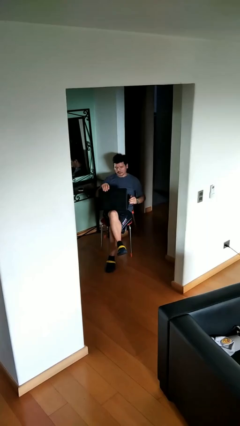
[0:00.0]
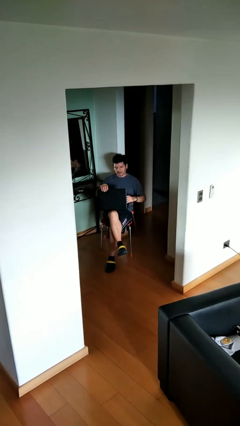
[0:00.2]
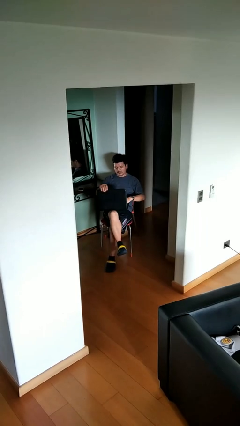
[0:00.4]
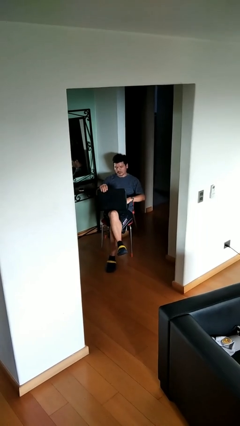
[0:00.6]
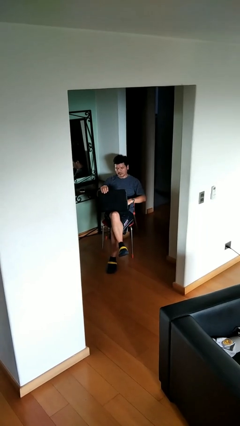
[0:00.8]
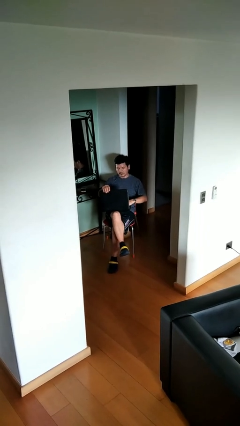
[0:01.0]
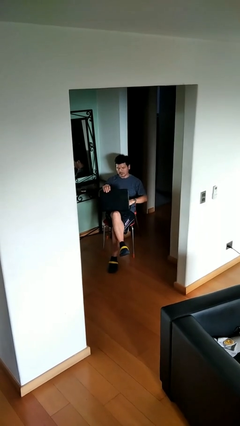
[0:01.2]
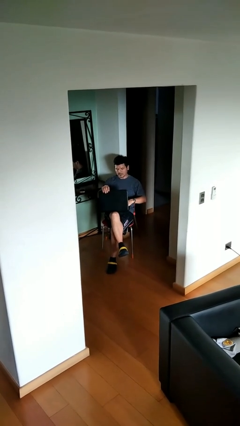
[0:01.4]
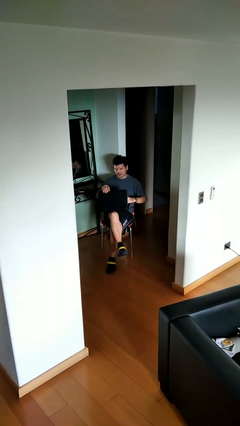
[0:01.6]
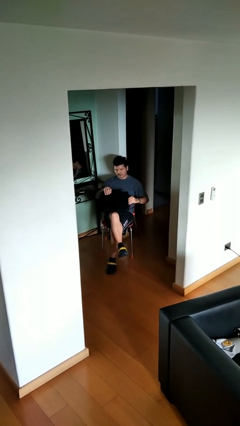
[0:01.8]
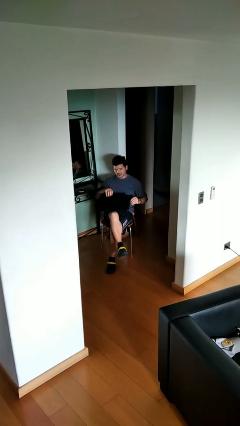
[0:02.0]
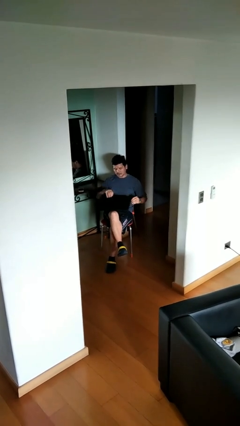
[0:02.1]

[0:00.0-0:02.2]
person interacts with laptop

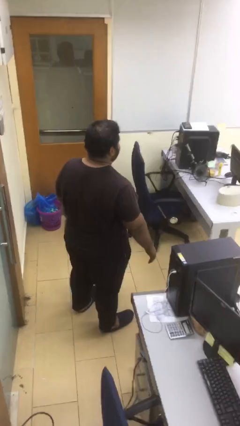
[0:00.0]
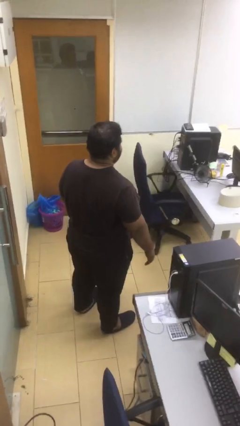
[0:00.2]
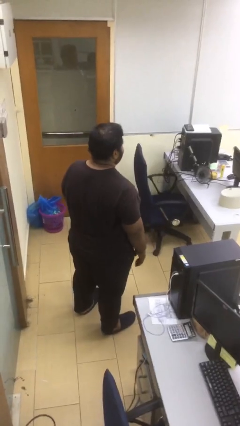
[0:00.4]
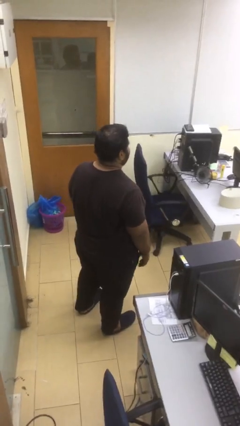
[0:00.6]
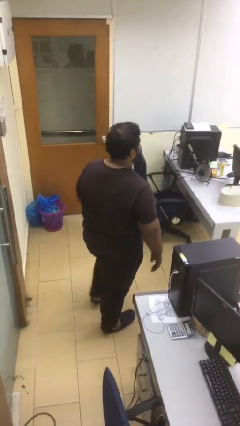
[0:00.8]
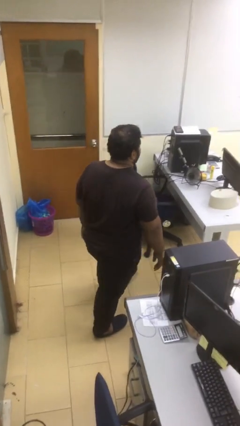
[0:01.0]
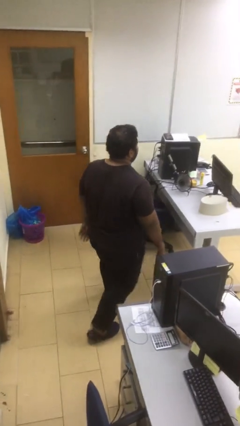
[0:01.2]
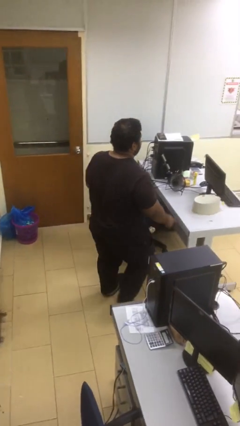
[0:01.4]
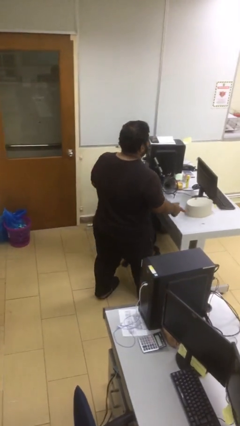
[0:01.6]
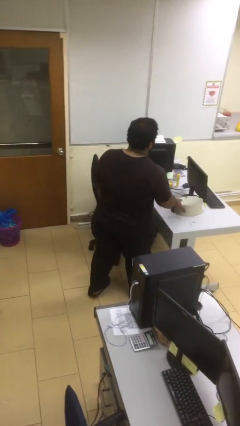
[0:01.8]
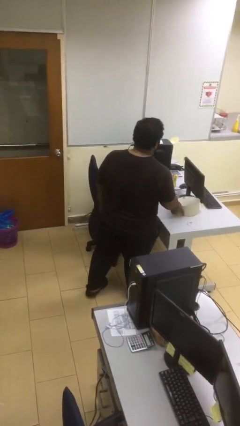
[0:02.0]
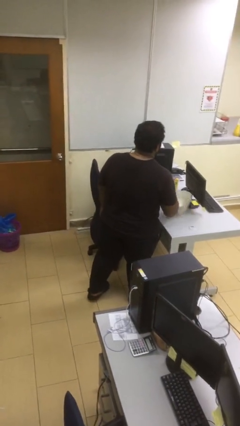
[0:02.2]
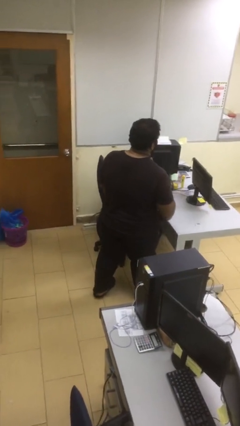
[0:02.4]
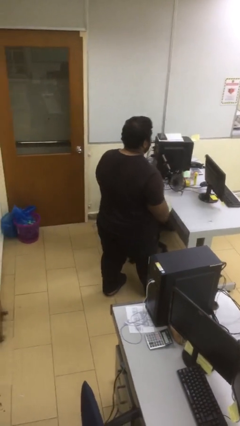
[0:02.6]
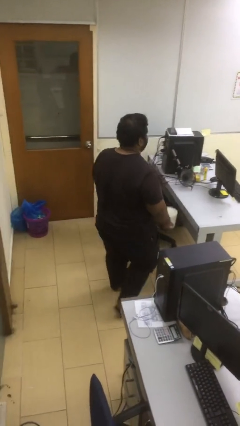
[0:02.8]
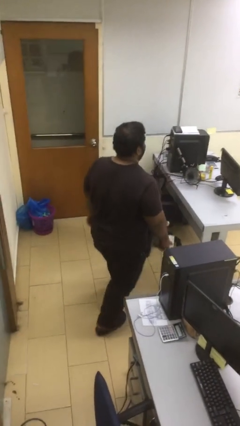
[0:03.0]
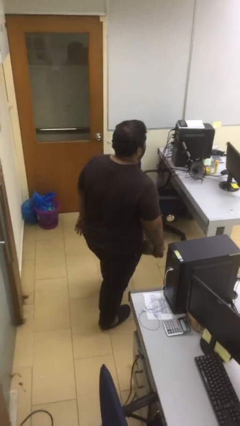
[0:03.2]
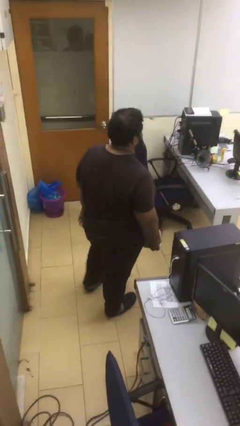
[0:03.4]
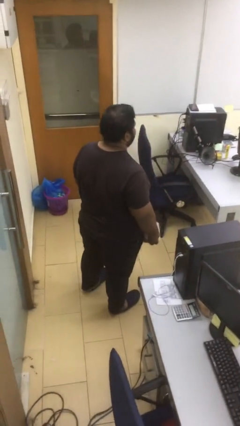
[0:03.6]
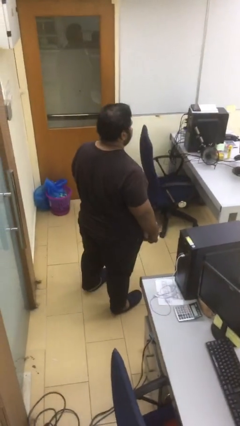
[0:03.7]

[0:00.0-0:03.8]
person picks up object from table

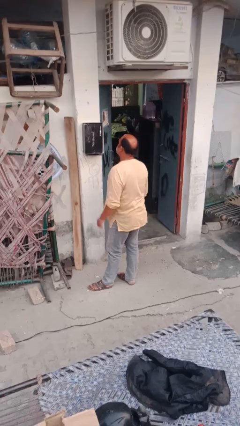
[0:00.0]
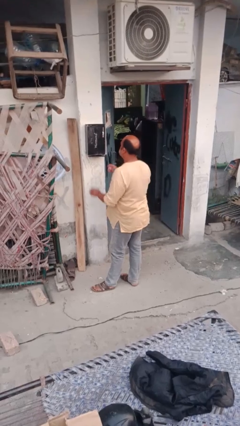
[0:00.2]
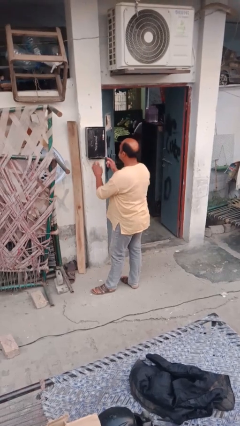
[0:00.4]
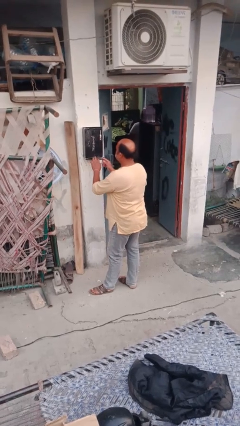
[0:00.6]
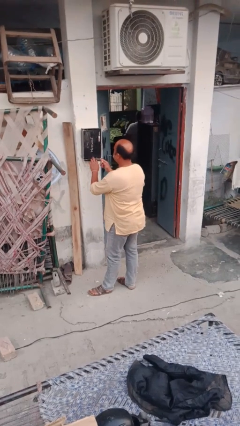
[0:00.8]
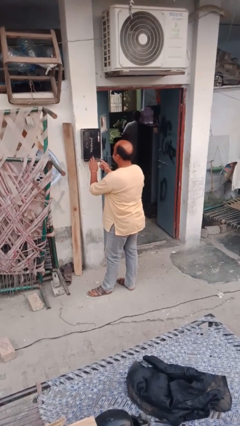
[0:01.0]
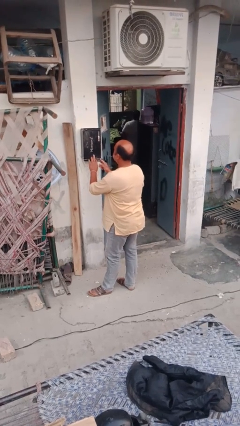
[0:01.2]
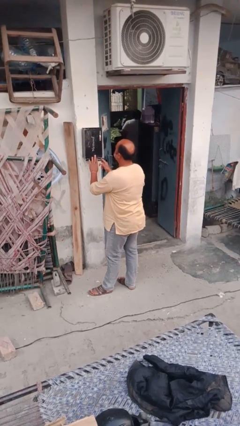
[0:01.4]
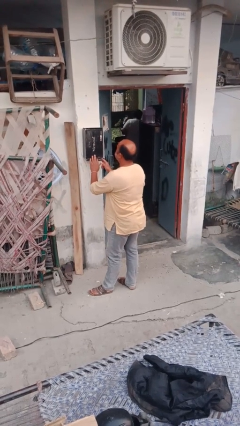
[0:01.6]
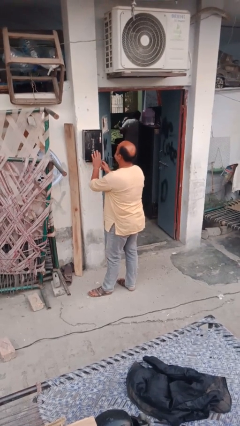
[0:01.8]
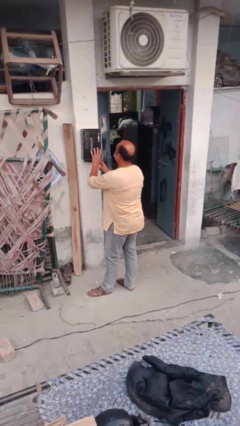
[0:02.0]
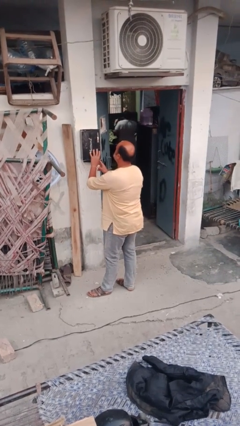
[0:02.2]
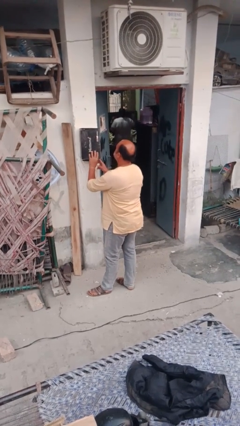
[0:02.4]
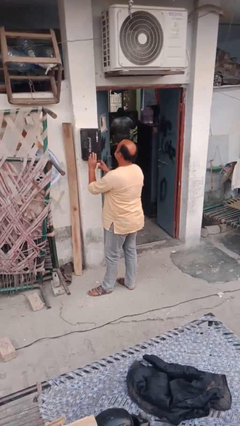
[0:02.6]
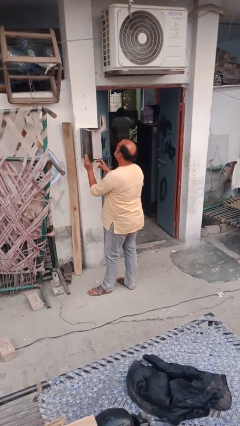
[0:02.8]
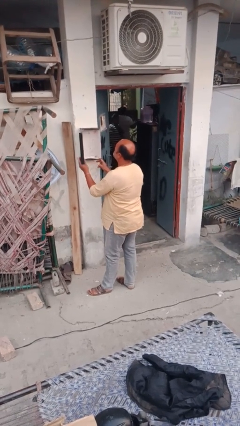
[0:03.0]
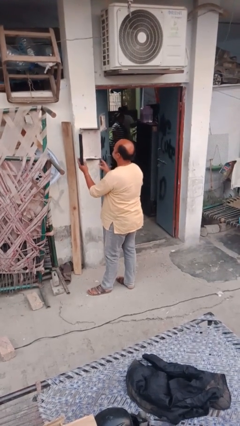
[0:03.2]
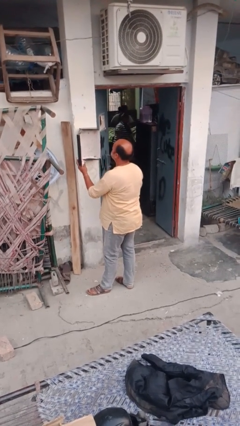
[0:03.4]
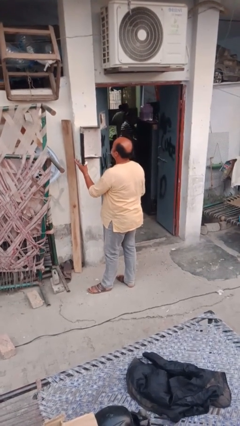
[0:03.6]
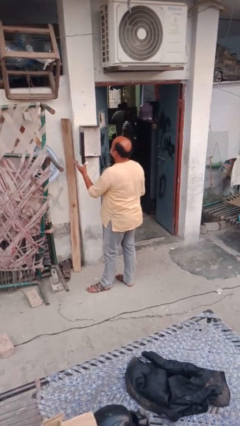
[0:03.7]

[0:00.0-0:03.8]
person opens mailbox

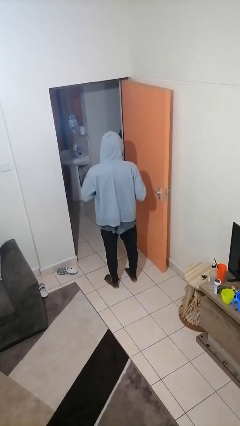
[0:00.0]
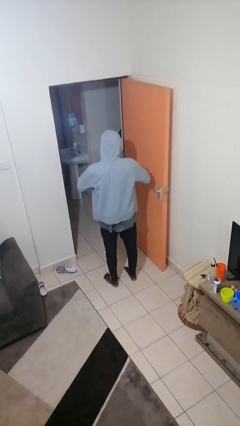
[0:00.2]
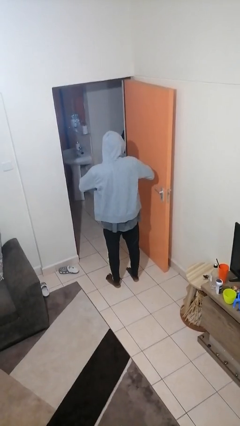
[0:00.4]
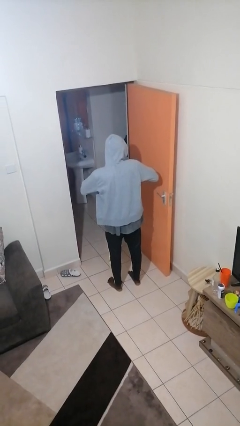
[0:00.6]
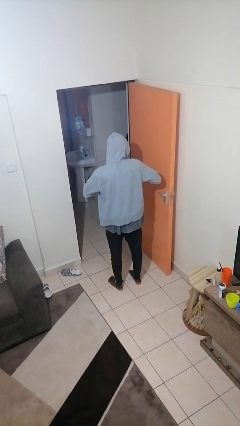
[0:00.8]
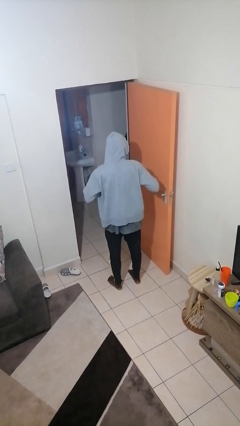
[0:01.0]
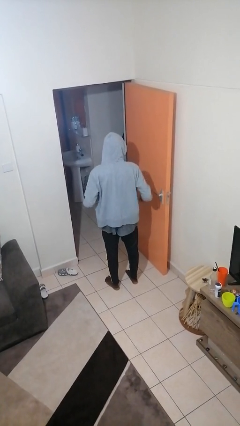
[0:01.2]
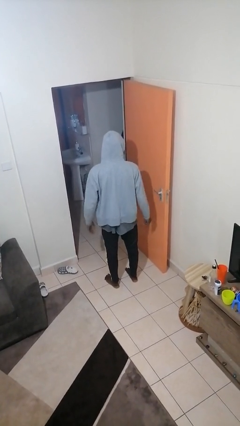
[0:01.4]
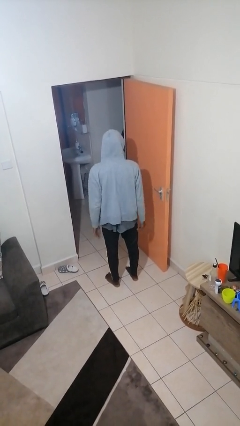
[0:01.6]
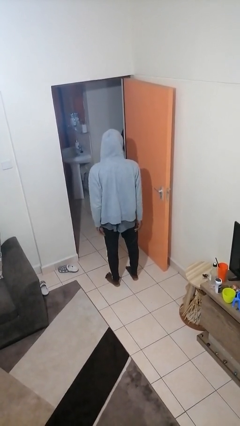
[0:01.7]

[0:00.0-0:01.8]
person takes off ring

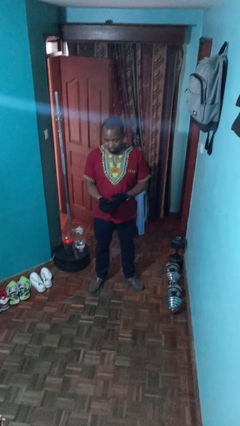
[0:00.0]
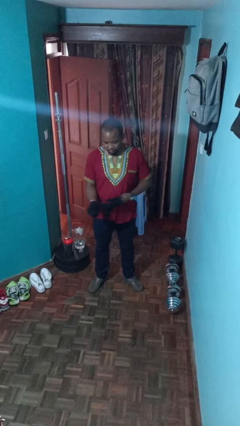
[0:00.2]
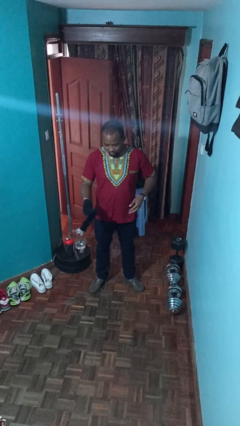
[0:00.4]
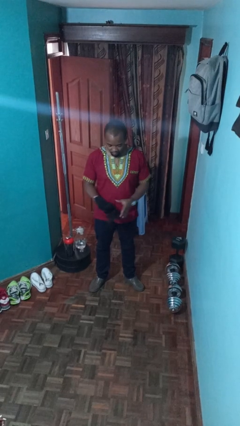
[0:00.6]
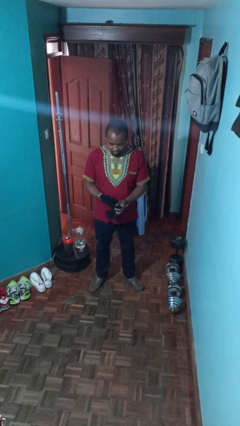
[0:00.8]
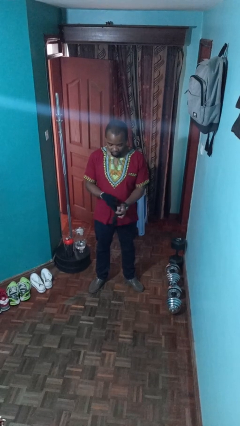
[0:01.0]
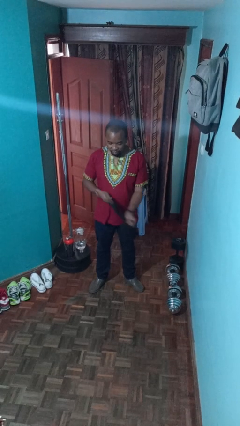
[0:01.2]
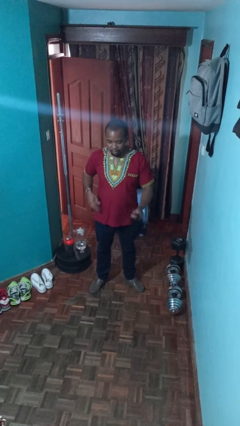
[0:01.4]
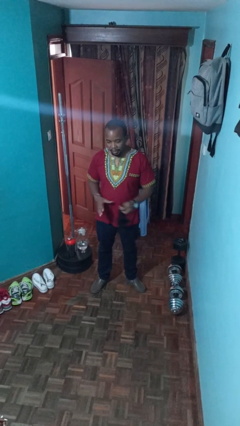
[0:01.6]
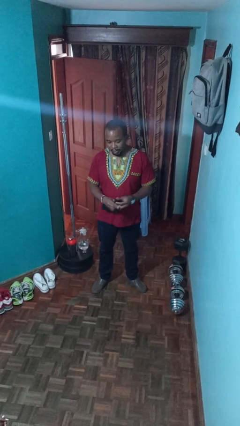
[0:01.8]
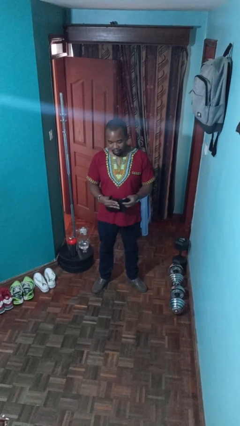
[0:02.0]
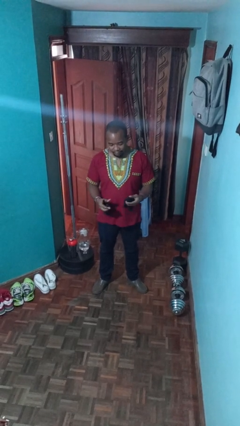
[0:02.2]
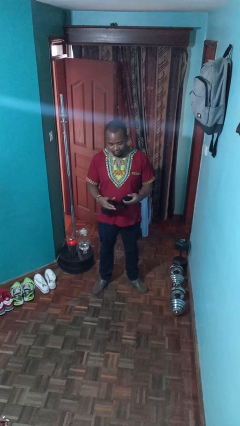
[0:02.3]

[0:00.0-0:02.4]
person takes off gloves

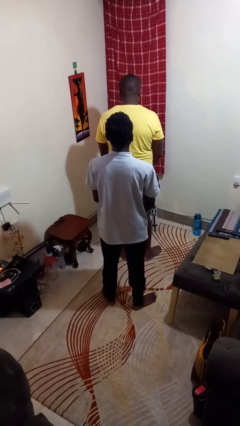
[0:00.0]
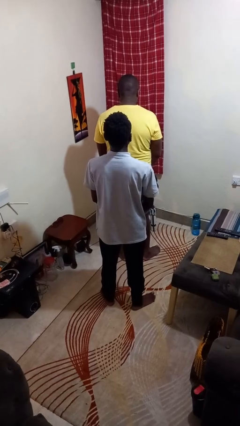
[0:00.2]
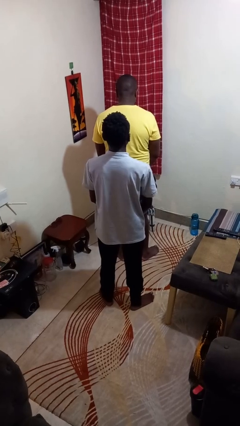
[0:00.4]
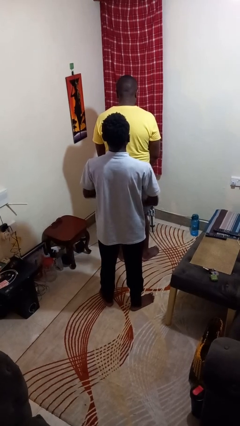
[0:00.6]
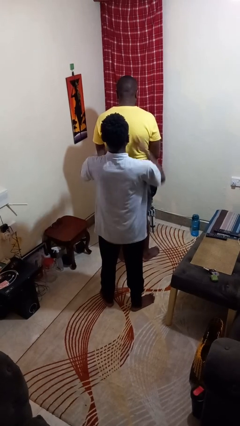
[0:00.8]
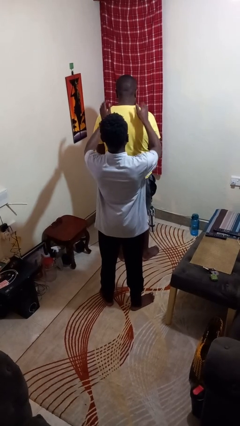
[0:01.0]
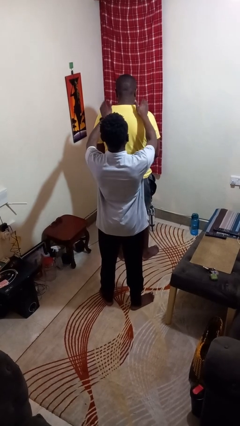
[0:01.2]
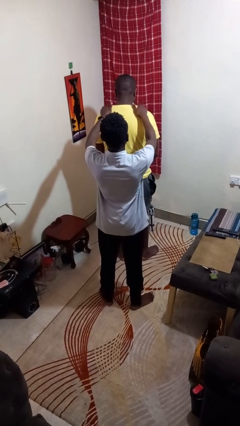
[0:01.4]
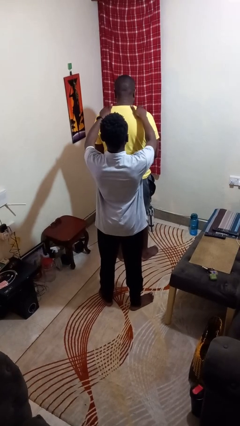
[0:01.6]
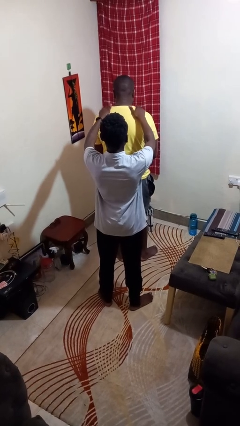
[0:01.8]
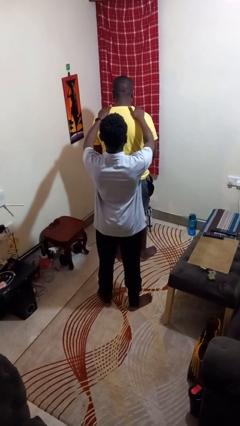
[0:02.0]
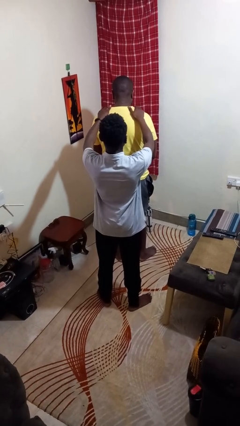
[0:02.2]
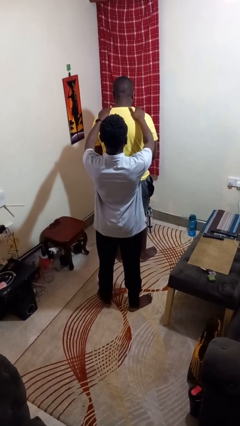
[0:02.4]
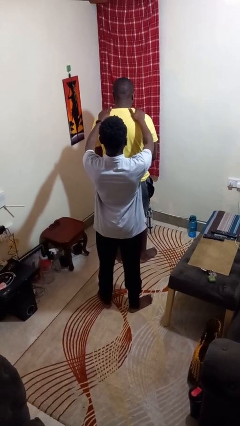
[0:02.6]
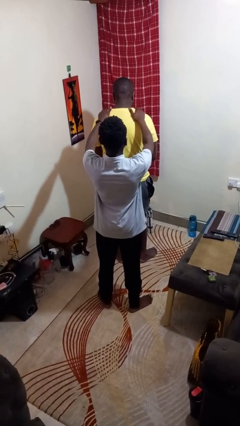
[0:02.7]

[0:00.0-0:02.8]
person pounds shoulders of person

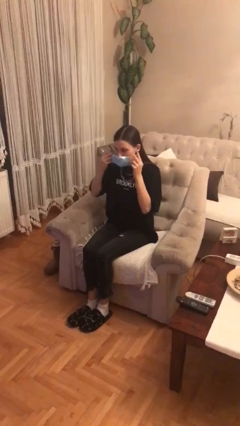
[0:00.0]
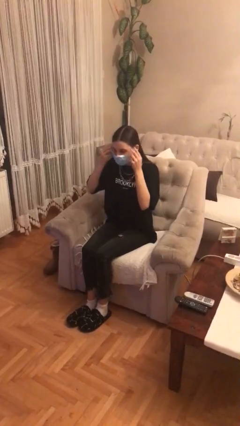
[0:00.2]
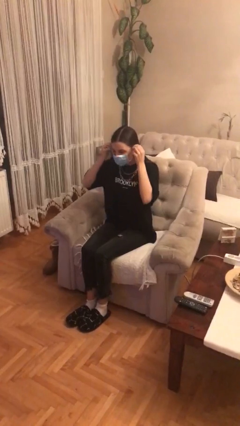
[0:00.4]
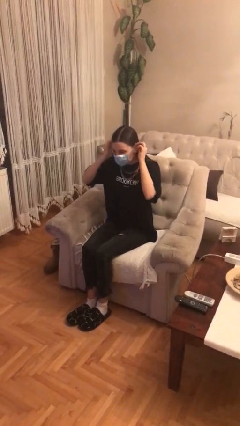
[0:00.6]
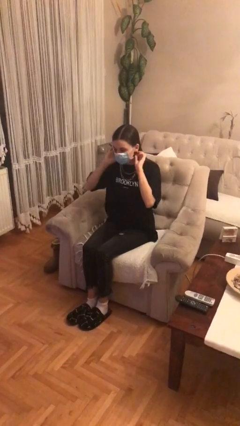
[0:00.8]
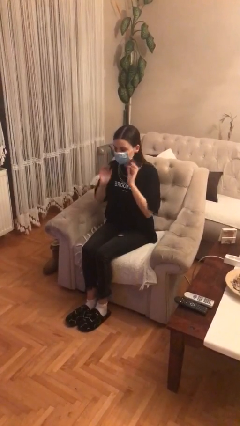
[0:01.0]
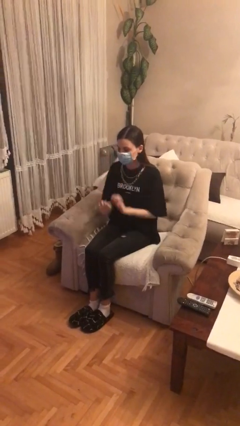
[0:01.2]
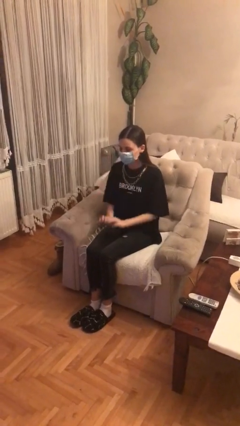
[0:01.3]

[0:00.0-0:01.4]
person puts on facemask
